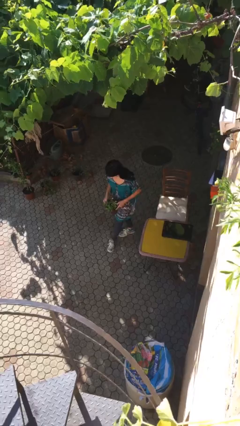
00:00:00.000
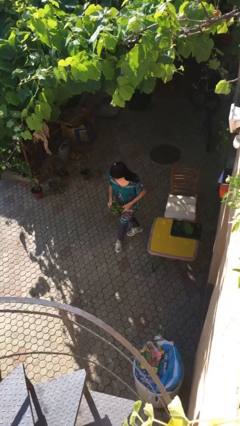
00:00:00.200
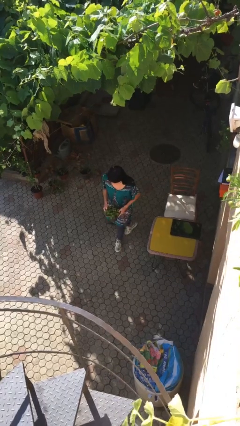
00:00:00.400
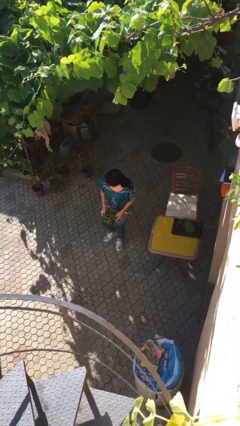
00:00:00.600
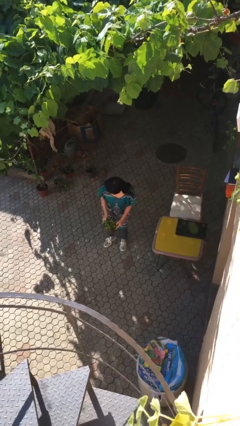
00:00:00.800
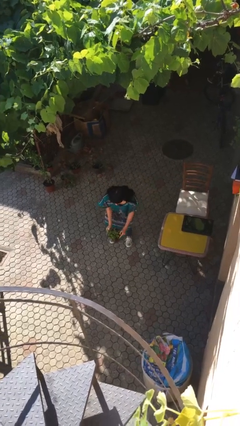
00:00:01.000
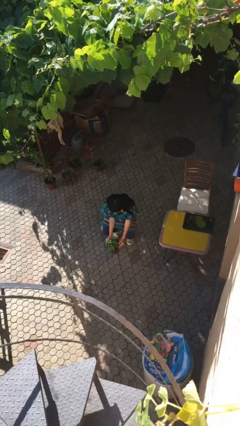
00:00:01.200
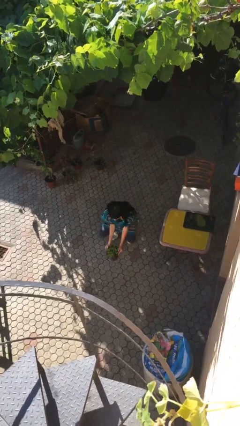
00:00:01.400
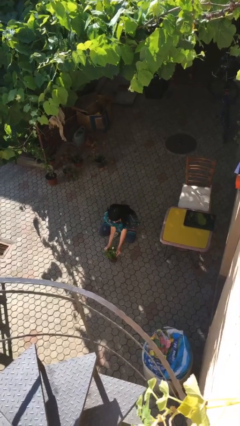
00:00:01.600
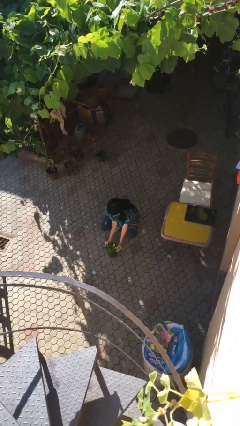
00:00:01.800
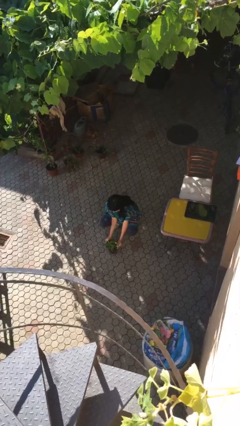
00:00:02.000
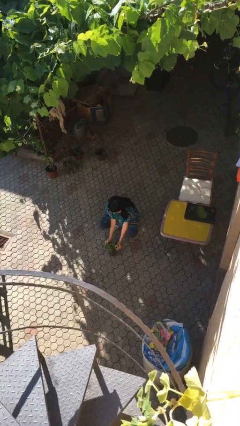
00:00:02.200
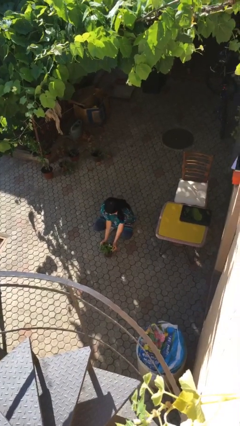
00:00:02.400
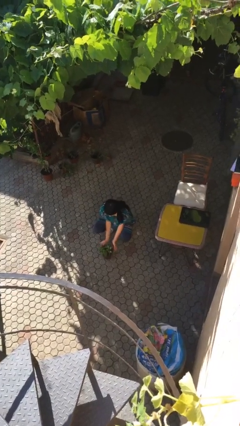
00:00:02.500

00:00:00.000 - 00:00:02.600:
person puts down object on floor

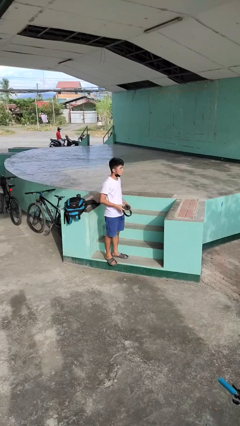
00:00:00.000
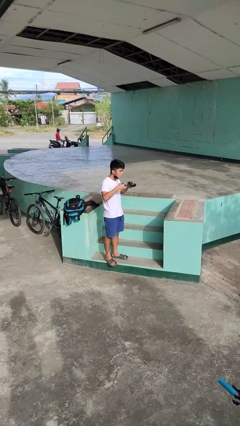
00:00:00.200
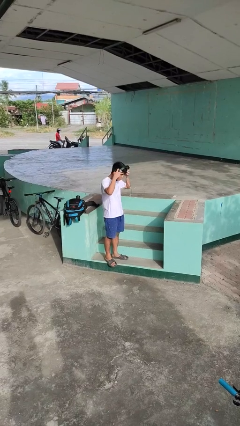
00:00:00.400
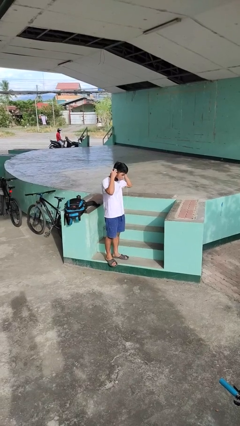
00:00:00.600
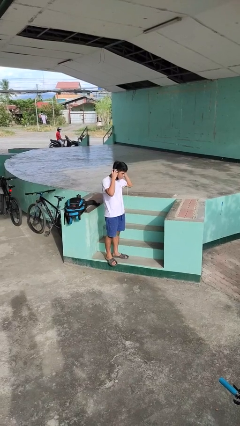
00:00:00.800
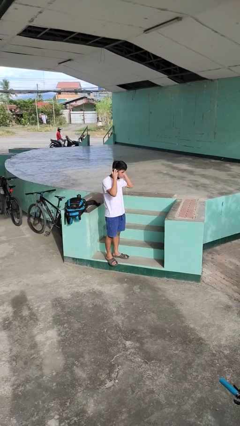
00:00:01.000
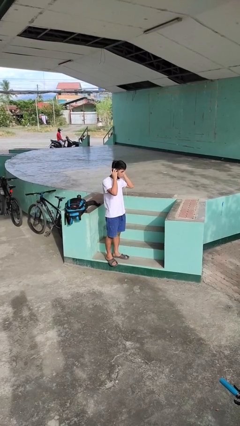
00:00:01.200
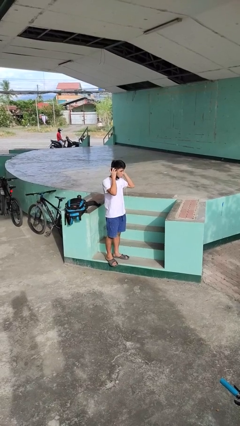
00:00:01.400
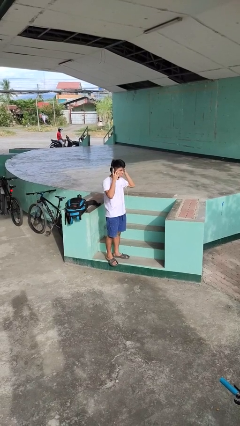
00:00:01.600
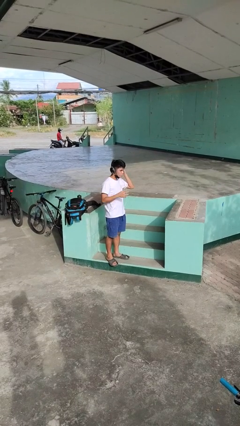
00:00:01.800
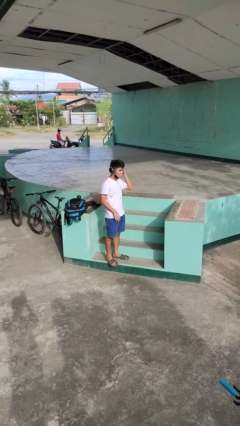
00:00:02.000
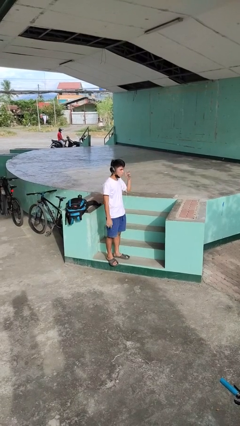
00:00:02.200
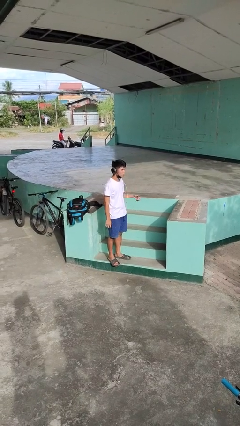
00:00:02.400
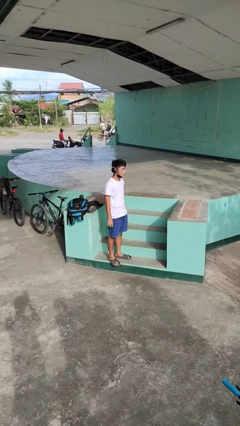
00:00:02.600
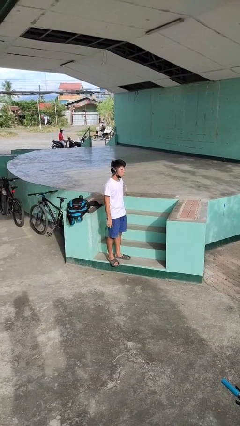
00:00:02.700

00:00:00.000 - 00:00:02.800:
person puts on headphones

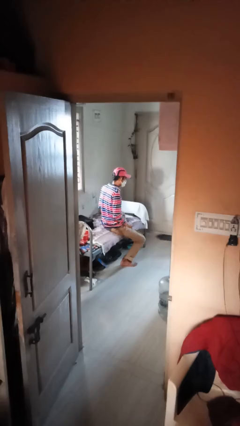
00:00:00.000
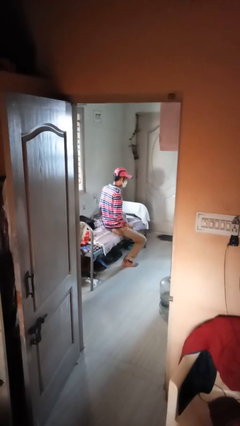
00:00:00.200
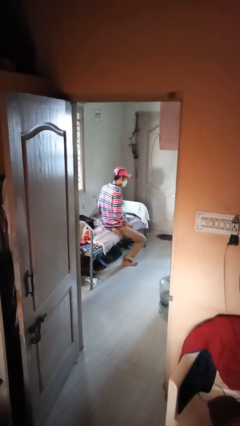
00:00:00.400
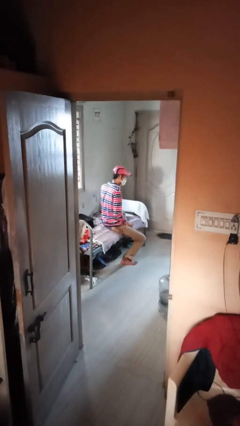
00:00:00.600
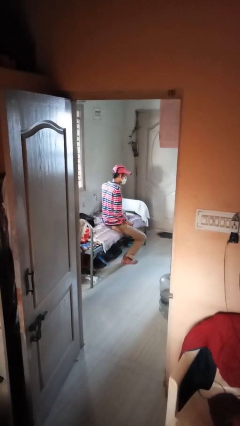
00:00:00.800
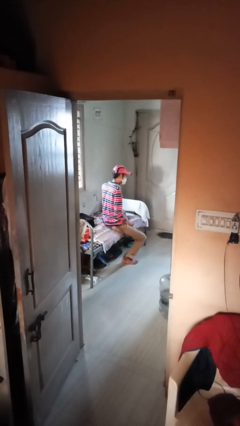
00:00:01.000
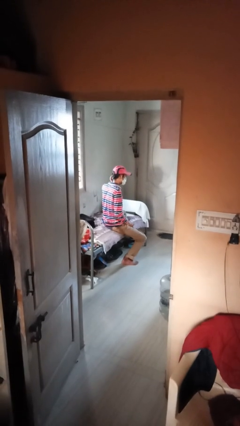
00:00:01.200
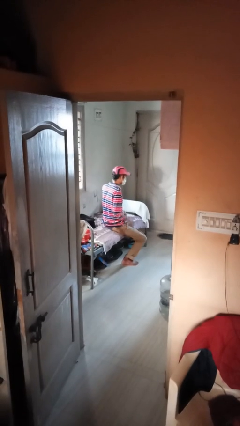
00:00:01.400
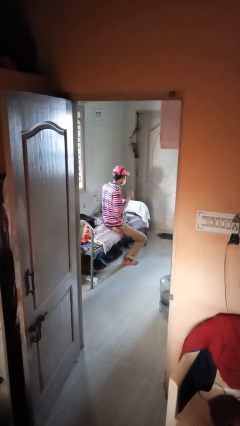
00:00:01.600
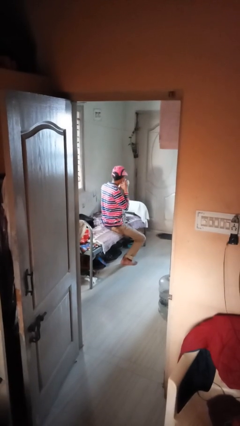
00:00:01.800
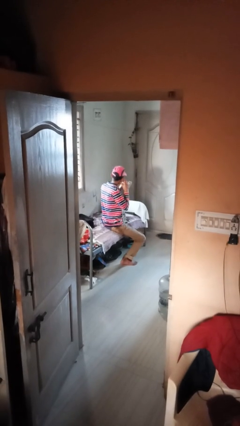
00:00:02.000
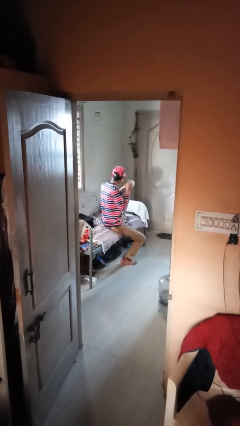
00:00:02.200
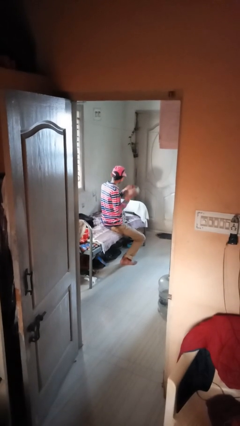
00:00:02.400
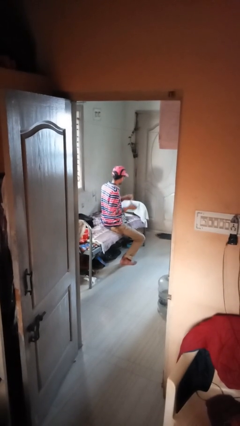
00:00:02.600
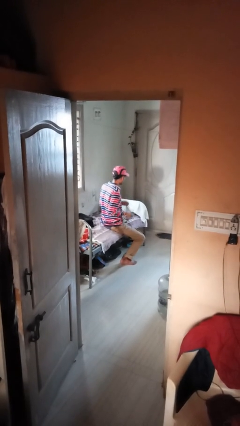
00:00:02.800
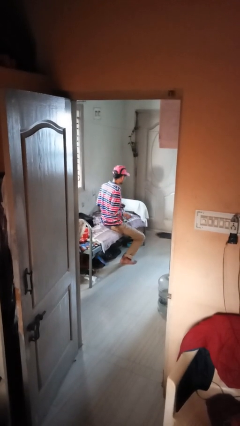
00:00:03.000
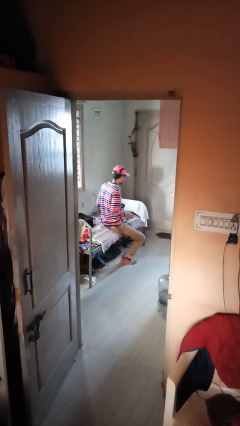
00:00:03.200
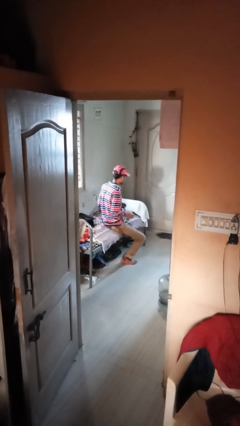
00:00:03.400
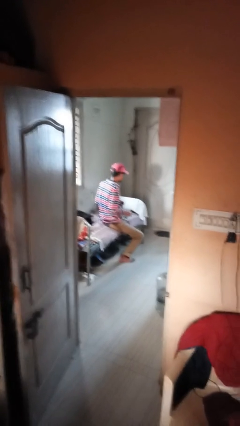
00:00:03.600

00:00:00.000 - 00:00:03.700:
person takes off facemask

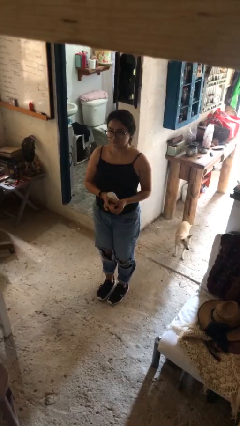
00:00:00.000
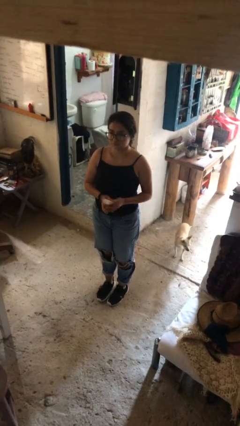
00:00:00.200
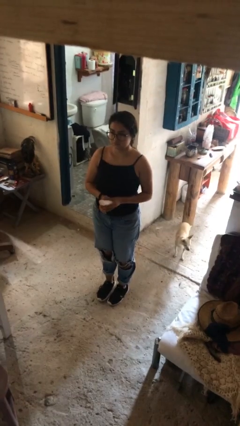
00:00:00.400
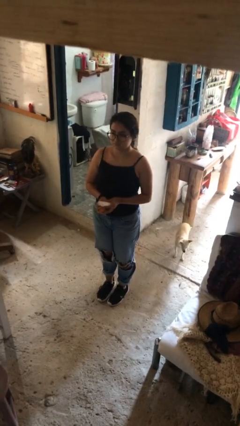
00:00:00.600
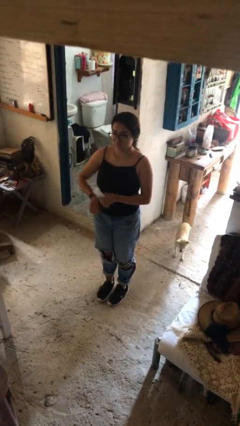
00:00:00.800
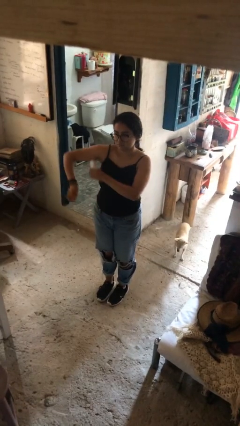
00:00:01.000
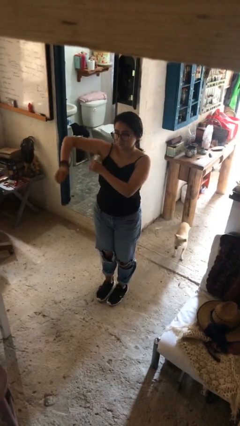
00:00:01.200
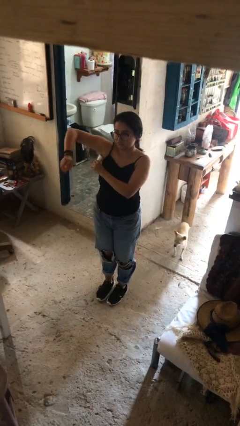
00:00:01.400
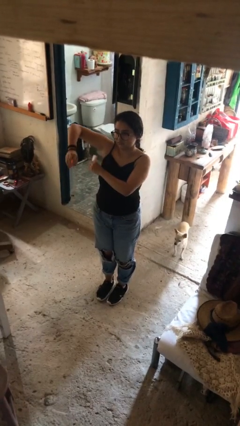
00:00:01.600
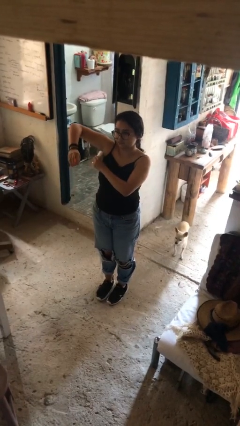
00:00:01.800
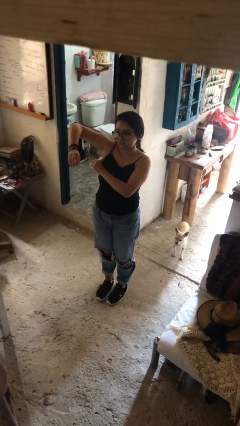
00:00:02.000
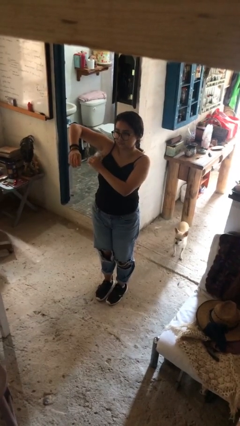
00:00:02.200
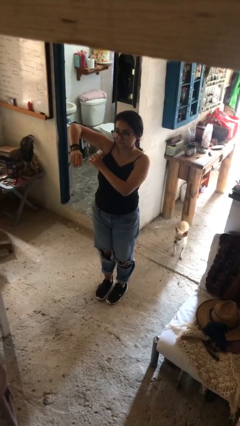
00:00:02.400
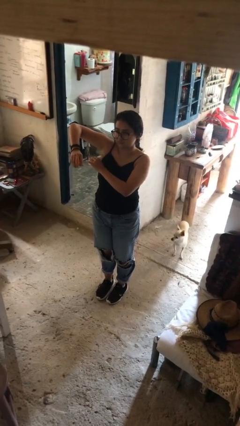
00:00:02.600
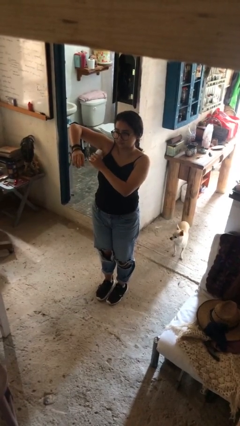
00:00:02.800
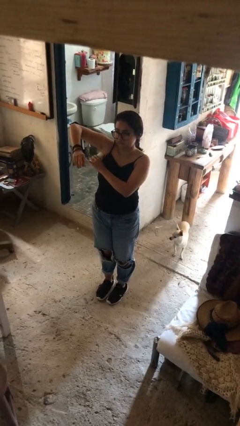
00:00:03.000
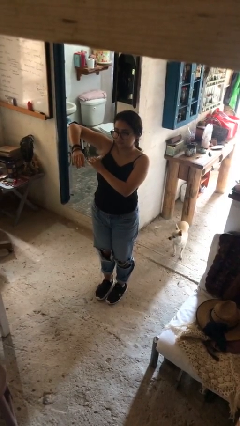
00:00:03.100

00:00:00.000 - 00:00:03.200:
person applies deodorant

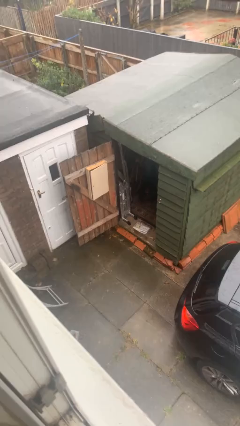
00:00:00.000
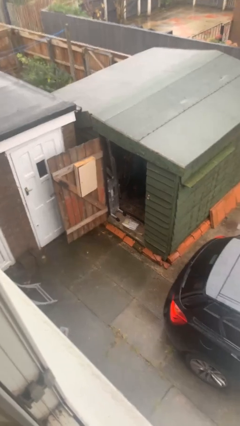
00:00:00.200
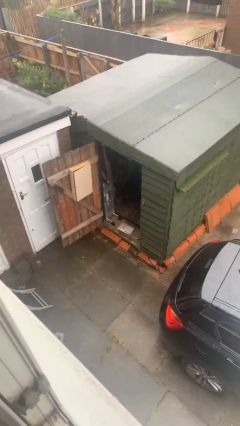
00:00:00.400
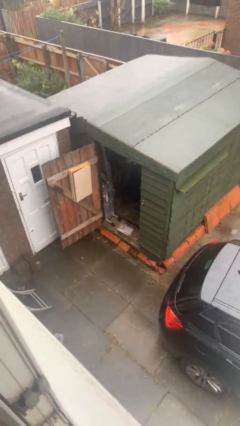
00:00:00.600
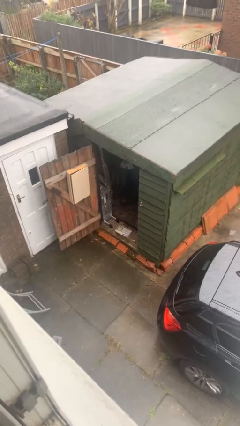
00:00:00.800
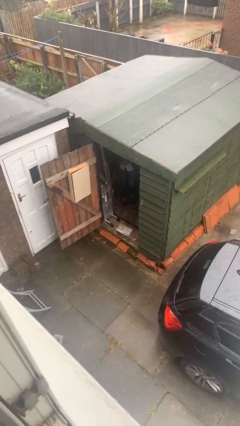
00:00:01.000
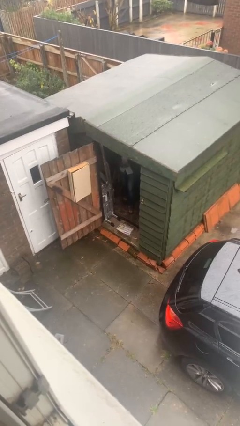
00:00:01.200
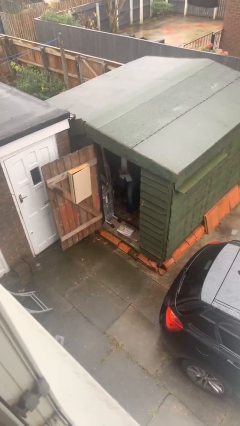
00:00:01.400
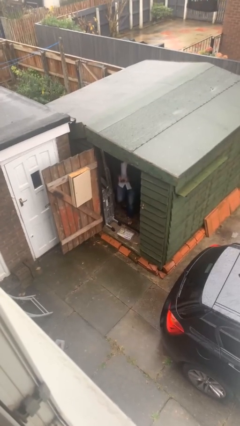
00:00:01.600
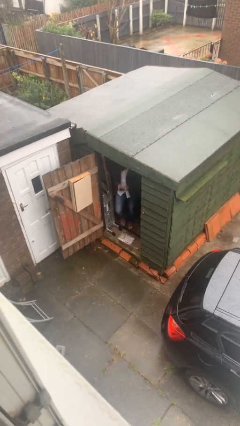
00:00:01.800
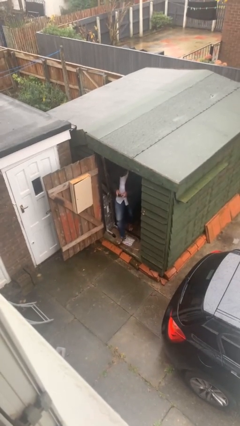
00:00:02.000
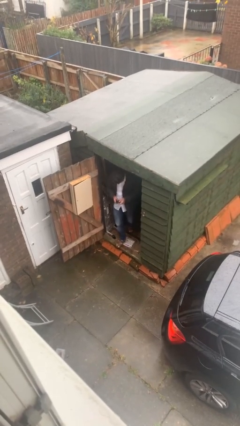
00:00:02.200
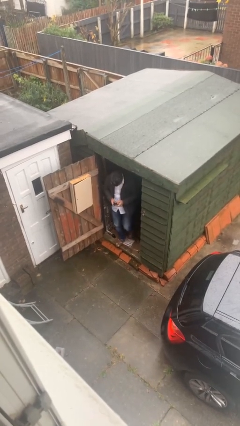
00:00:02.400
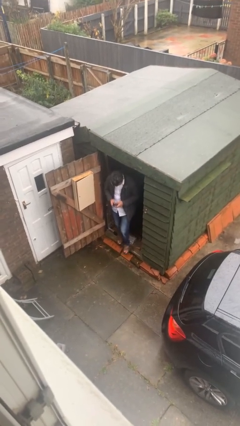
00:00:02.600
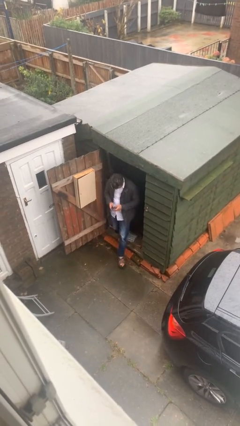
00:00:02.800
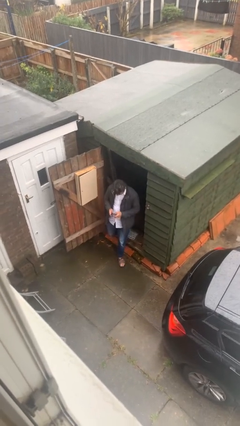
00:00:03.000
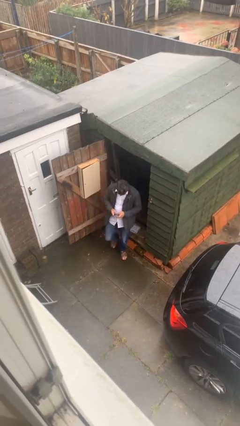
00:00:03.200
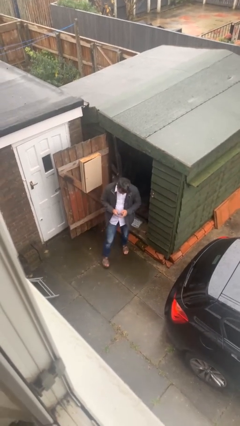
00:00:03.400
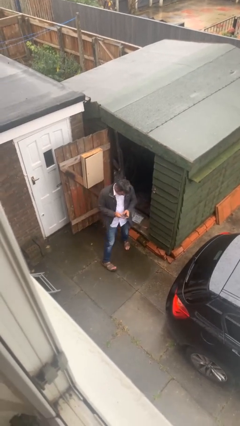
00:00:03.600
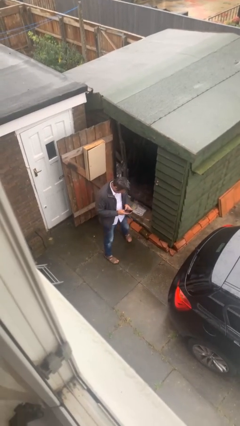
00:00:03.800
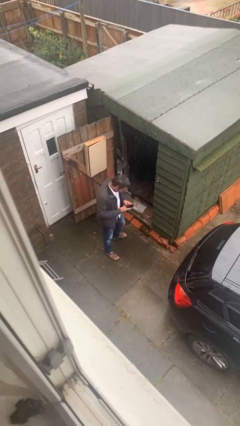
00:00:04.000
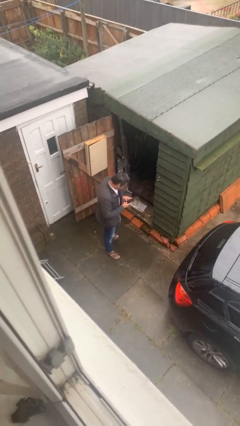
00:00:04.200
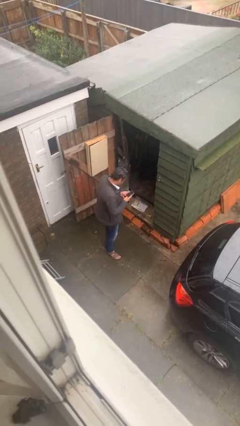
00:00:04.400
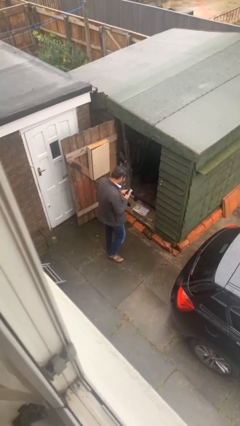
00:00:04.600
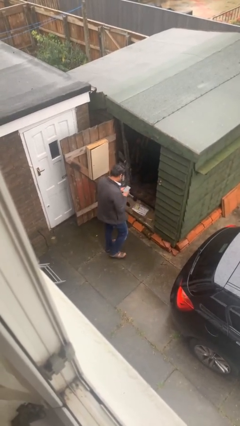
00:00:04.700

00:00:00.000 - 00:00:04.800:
person enters scene through structure

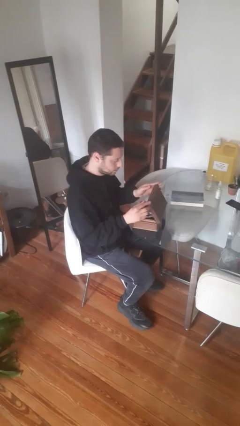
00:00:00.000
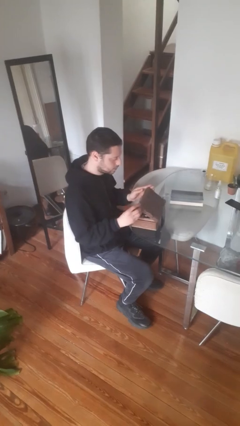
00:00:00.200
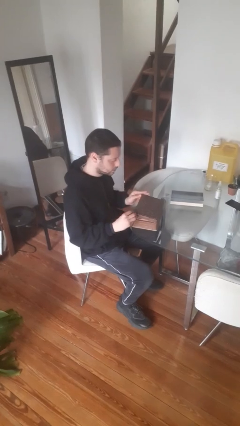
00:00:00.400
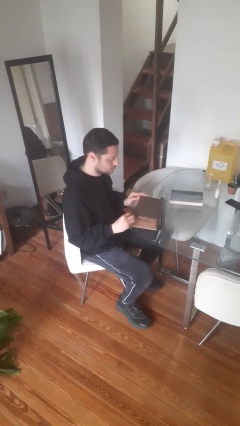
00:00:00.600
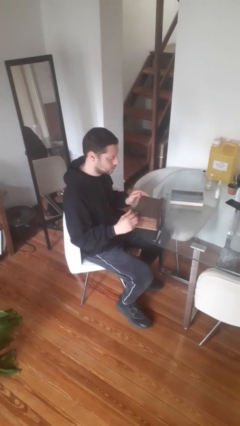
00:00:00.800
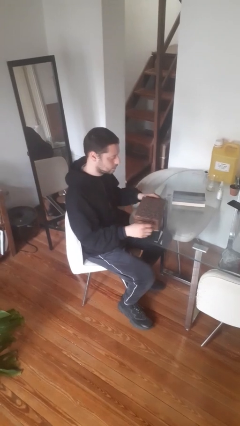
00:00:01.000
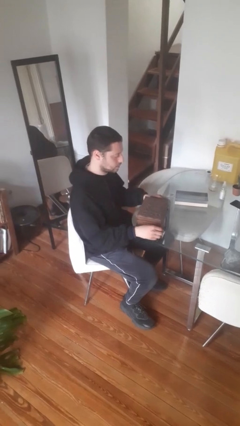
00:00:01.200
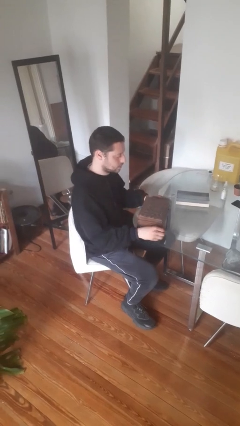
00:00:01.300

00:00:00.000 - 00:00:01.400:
person closes jewelry box
